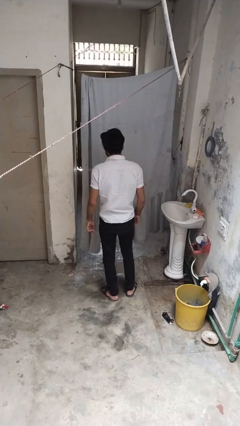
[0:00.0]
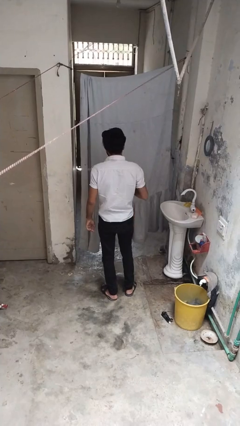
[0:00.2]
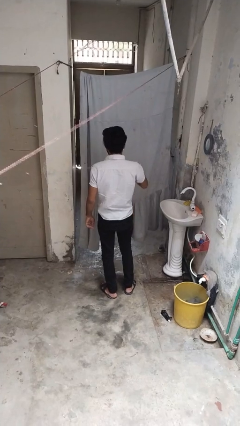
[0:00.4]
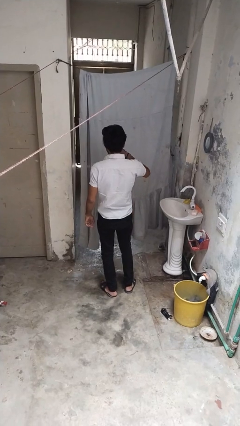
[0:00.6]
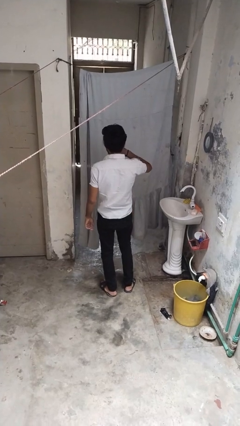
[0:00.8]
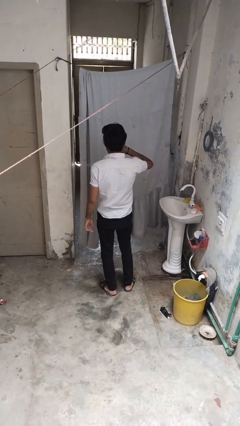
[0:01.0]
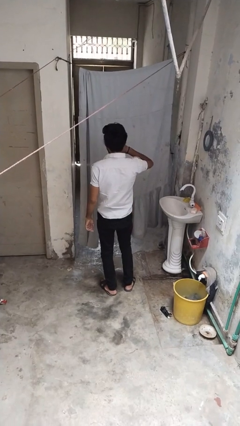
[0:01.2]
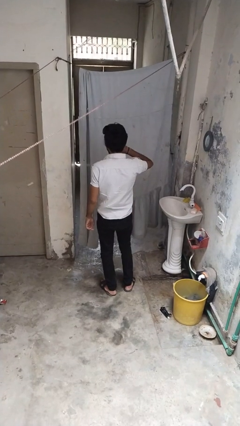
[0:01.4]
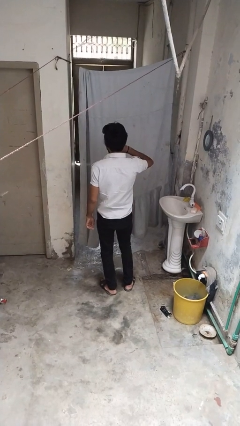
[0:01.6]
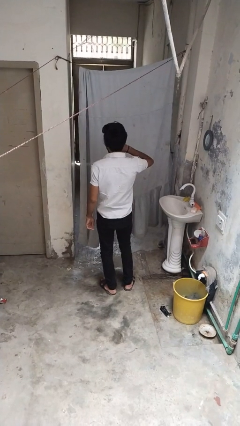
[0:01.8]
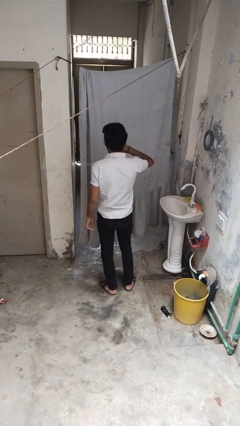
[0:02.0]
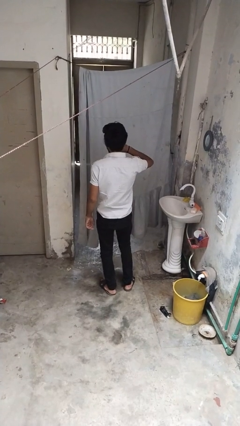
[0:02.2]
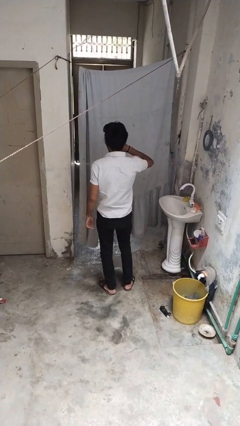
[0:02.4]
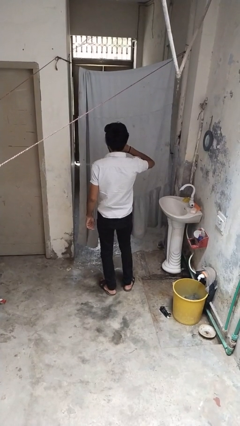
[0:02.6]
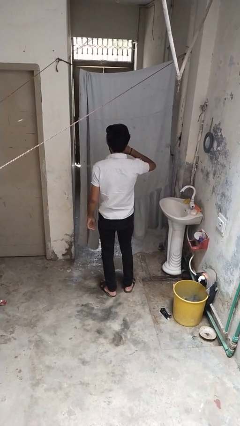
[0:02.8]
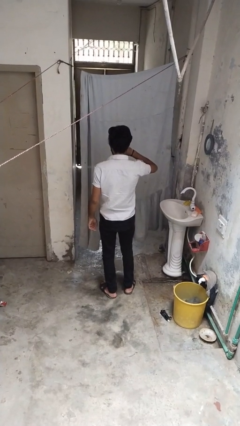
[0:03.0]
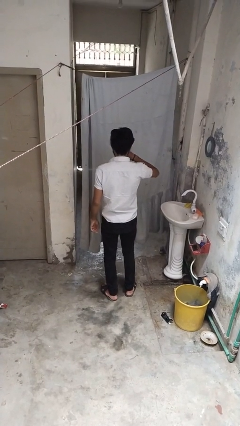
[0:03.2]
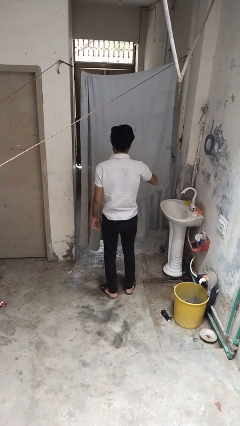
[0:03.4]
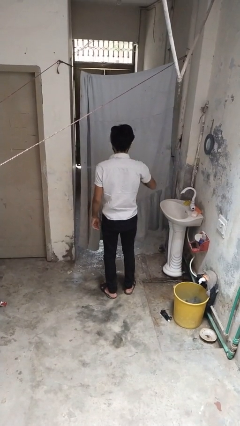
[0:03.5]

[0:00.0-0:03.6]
person yawns

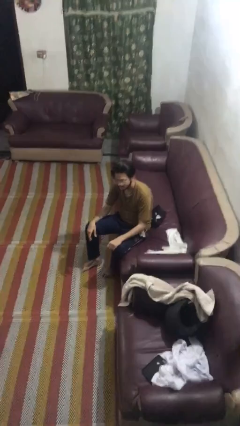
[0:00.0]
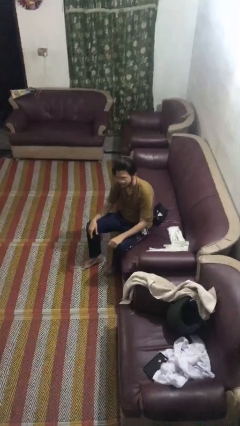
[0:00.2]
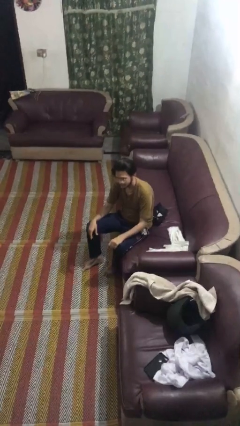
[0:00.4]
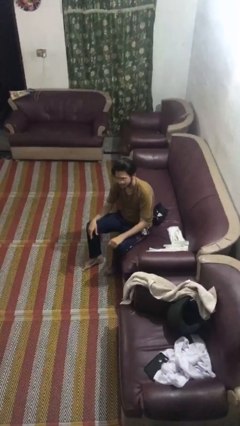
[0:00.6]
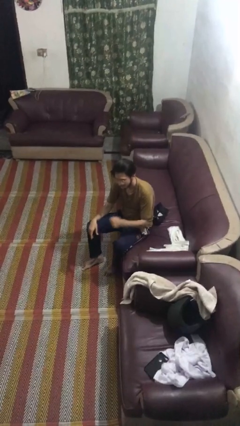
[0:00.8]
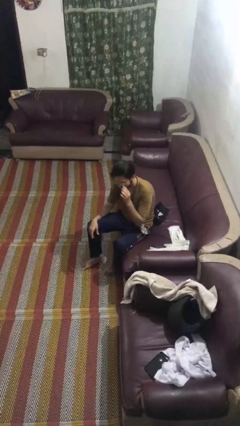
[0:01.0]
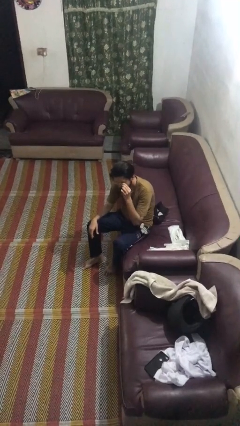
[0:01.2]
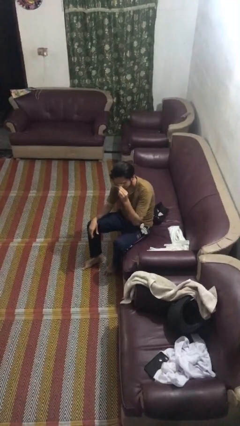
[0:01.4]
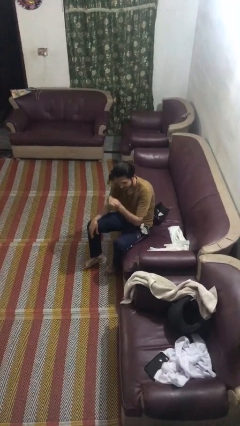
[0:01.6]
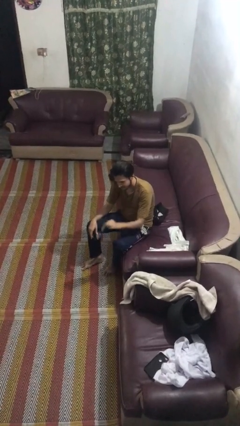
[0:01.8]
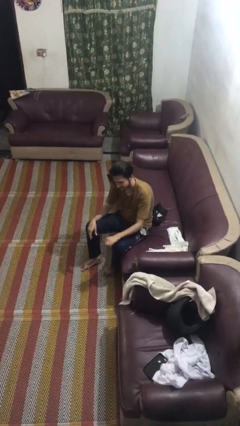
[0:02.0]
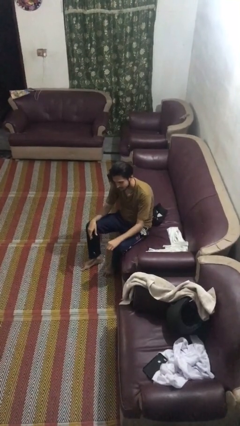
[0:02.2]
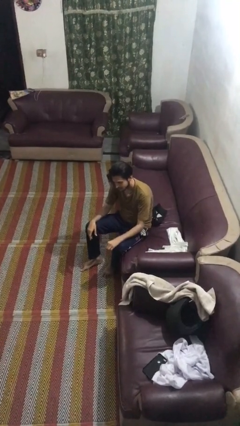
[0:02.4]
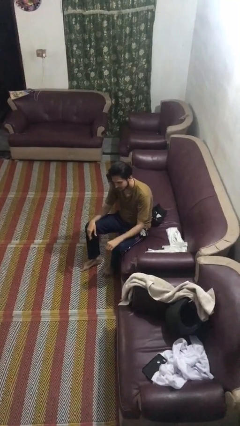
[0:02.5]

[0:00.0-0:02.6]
person takes off glasses

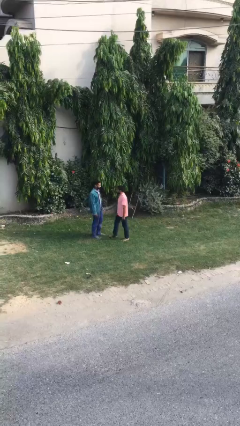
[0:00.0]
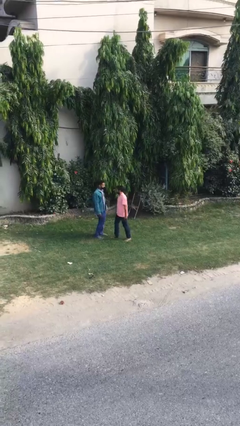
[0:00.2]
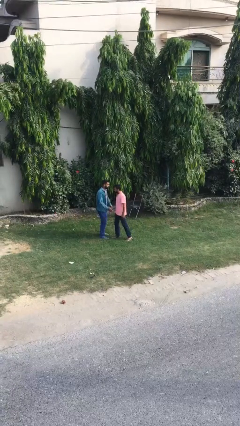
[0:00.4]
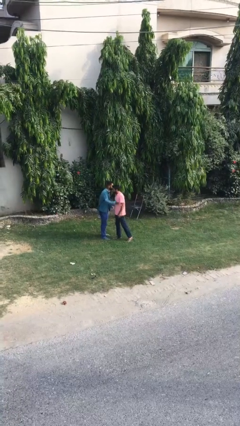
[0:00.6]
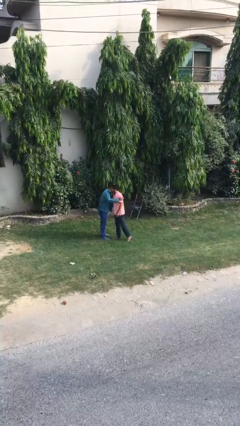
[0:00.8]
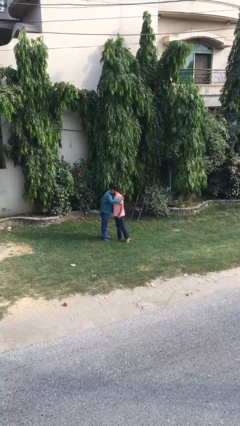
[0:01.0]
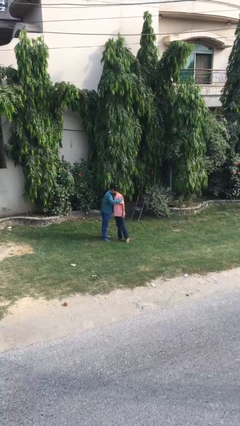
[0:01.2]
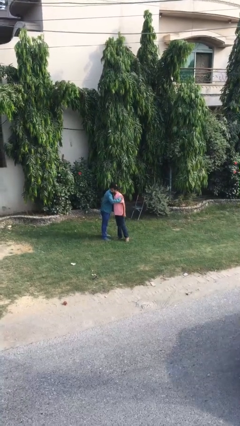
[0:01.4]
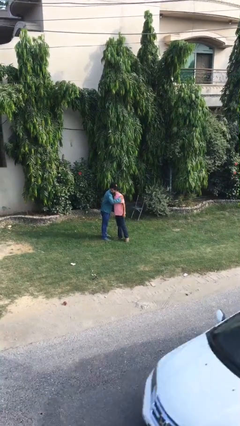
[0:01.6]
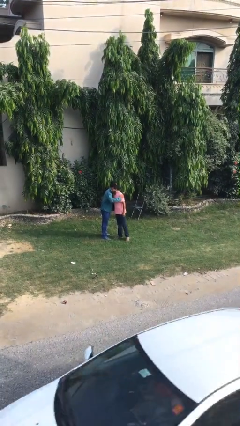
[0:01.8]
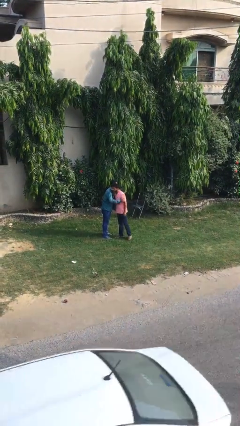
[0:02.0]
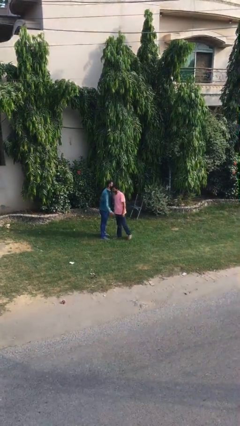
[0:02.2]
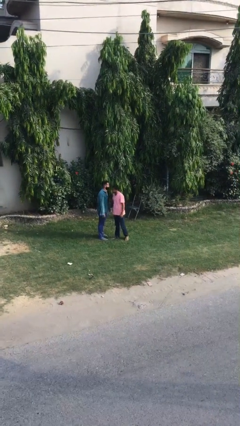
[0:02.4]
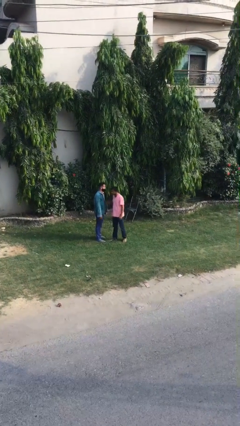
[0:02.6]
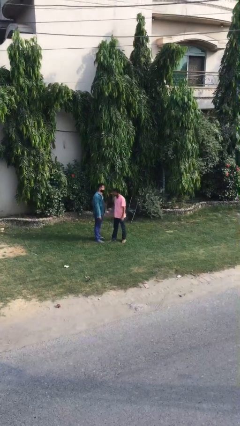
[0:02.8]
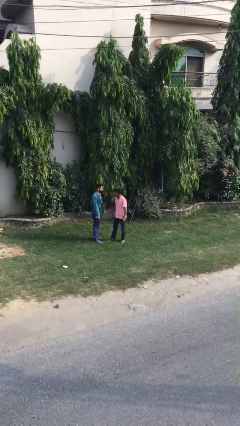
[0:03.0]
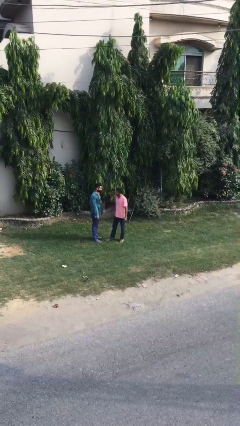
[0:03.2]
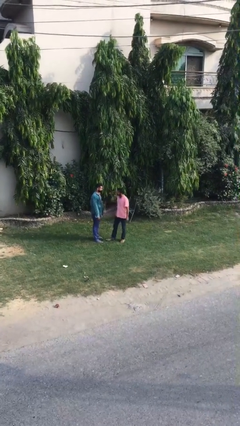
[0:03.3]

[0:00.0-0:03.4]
person embraces person

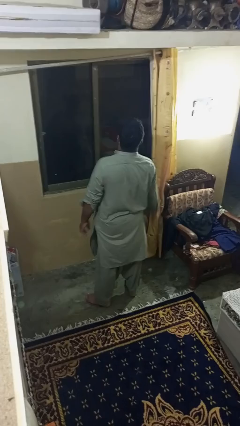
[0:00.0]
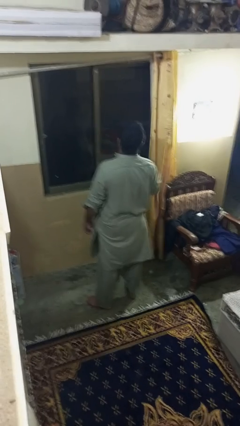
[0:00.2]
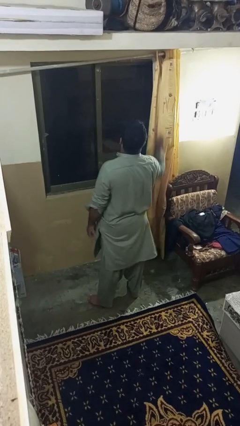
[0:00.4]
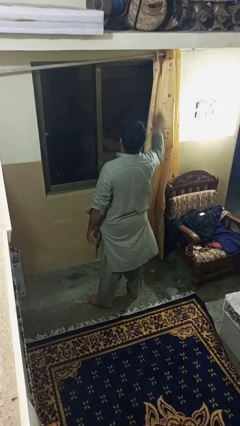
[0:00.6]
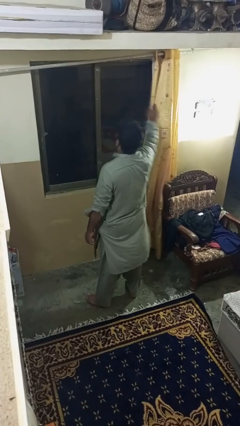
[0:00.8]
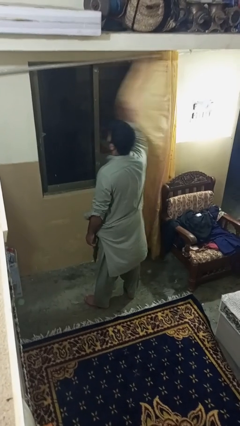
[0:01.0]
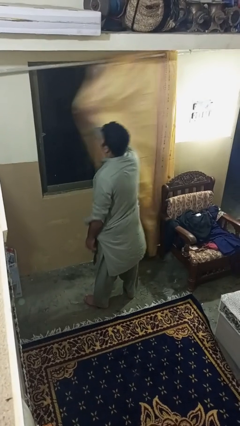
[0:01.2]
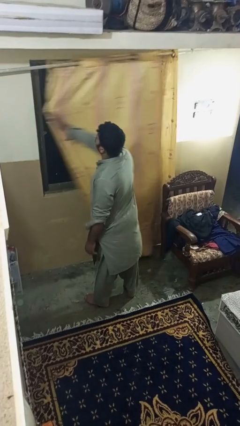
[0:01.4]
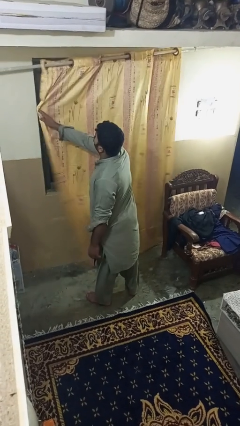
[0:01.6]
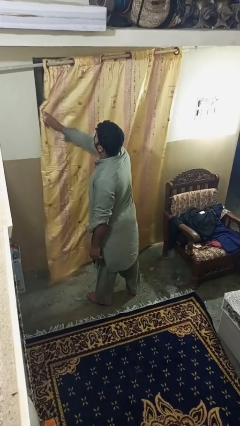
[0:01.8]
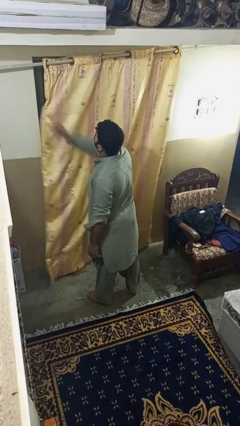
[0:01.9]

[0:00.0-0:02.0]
person closes curtains

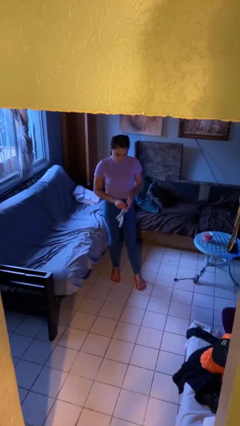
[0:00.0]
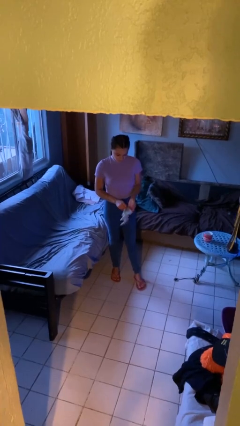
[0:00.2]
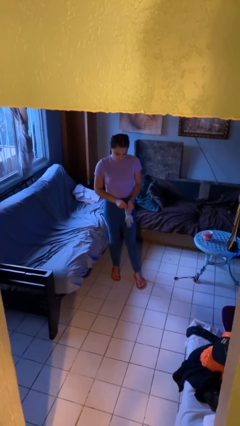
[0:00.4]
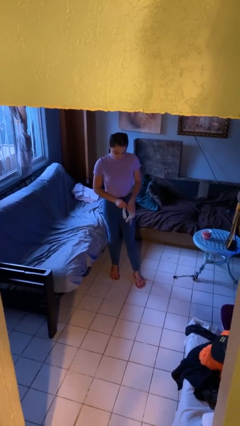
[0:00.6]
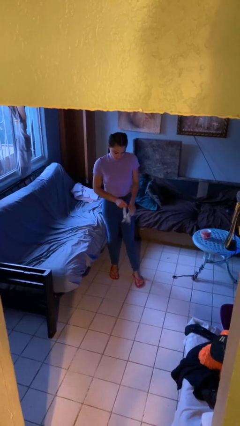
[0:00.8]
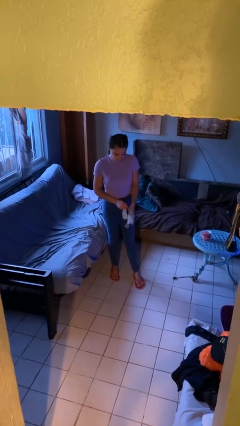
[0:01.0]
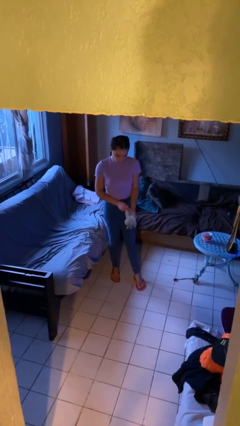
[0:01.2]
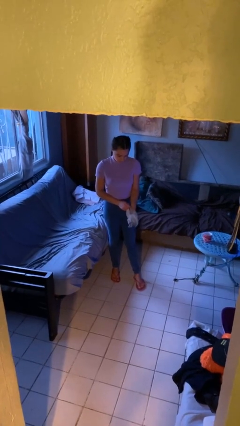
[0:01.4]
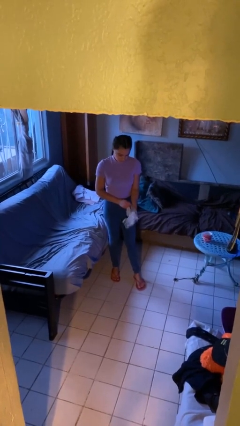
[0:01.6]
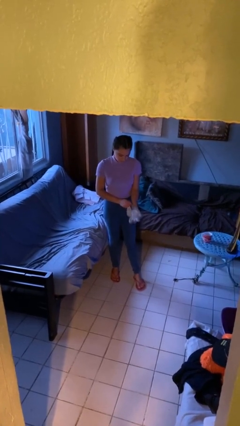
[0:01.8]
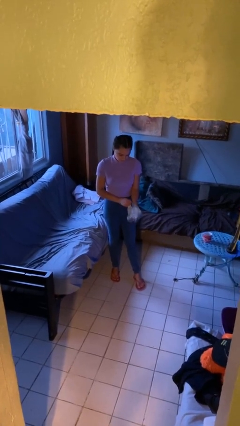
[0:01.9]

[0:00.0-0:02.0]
person puts on gloves

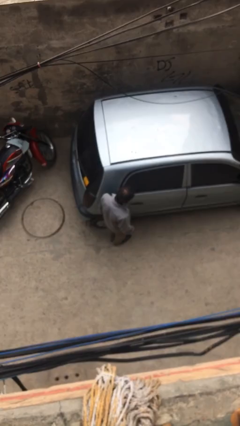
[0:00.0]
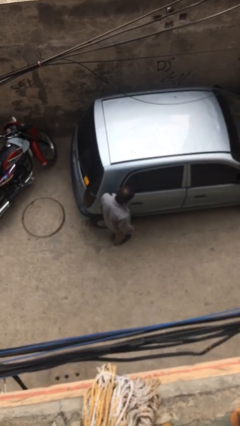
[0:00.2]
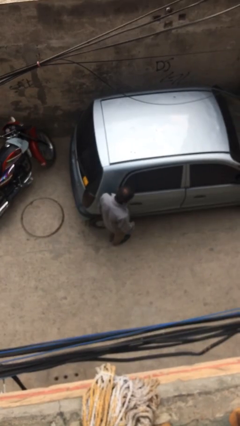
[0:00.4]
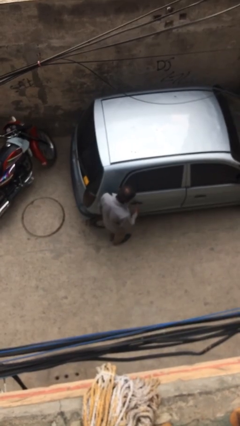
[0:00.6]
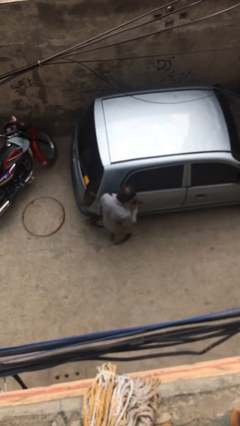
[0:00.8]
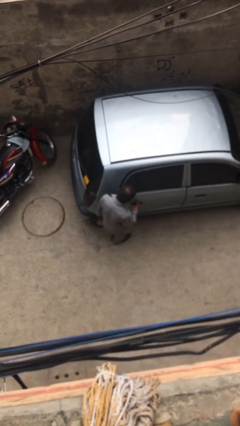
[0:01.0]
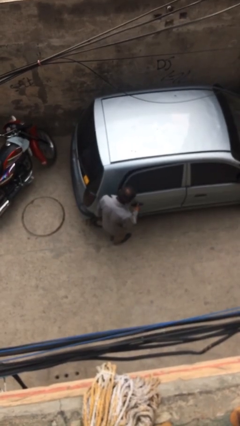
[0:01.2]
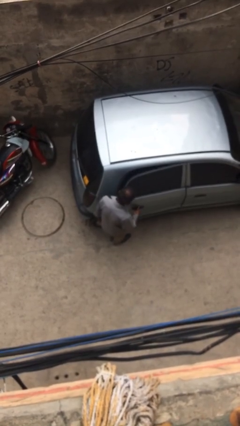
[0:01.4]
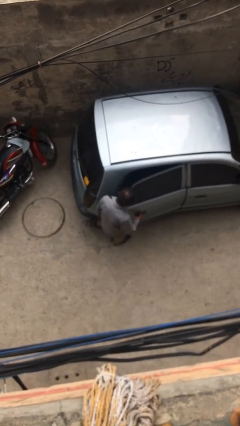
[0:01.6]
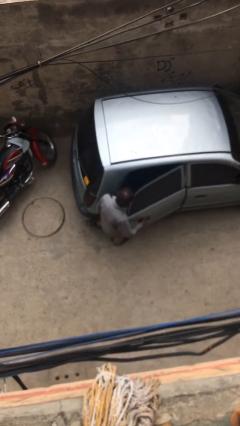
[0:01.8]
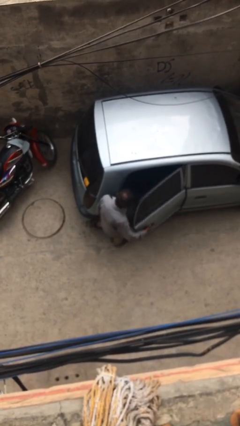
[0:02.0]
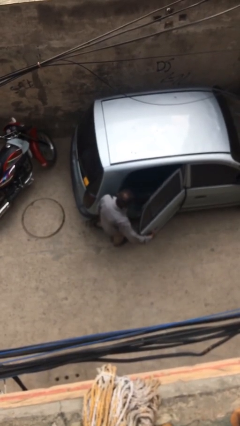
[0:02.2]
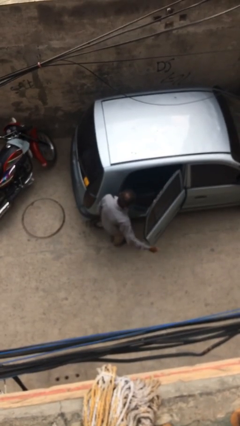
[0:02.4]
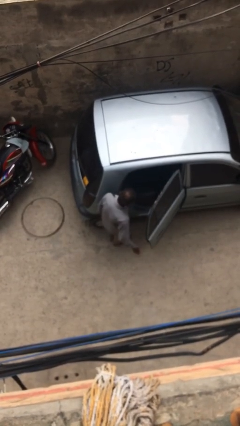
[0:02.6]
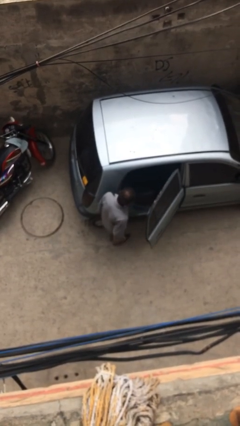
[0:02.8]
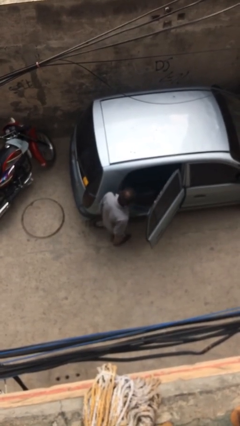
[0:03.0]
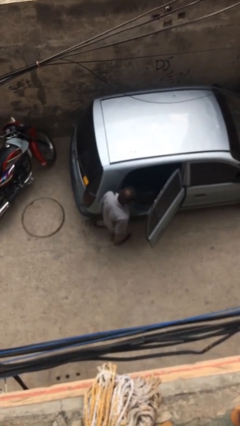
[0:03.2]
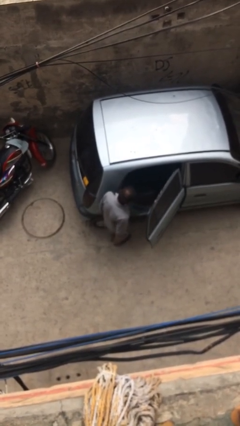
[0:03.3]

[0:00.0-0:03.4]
person opens car door

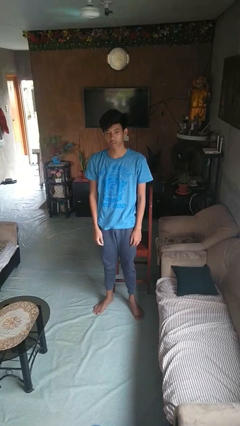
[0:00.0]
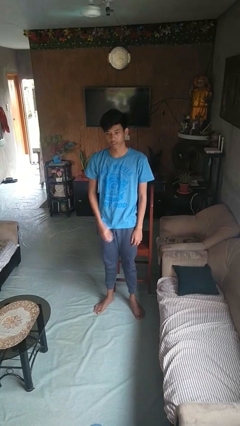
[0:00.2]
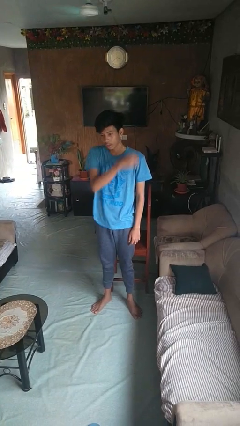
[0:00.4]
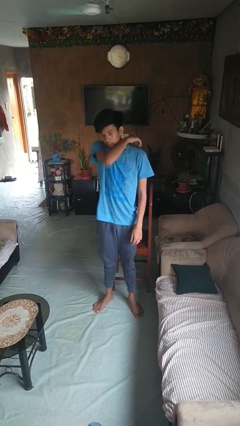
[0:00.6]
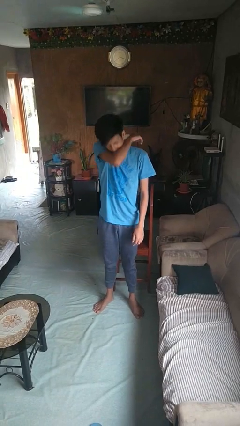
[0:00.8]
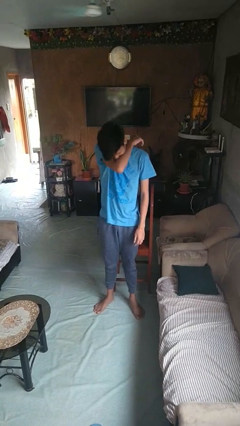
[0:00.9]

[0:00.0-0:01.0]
person sneezes into arm
